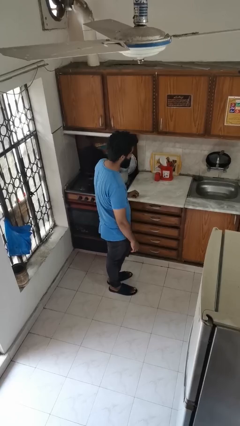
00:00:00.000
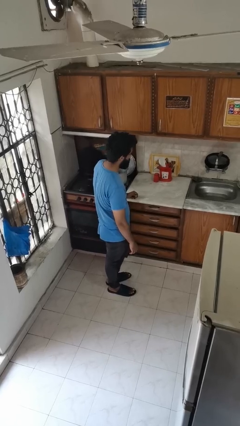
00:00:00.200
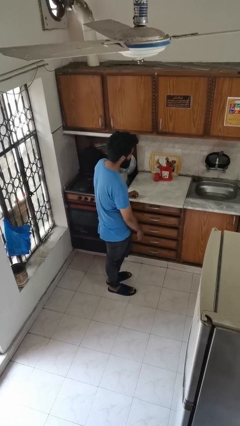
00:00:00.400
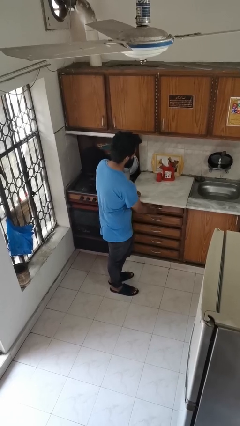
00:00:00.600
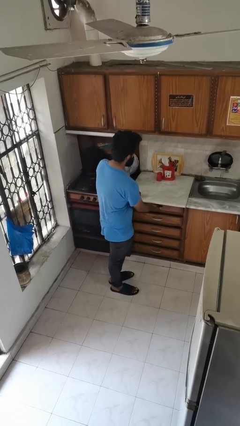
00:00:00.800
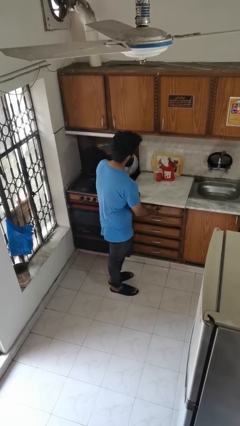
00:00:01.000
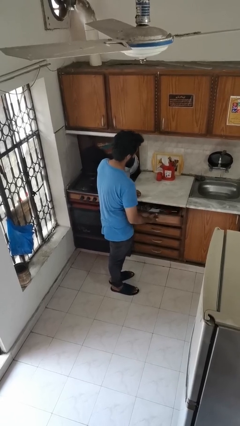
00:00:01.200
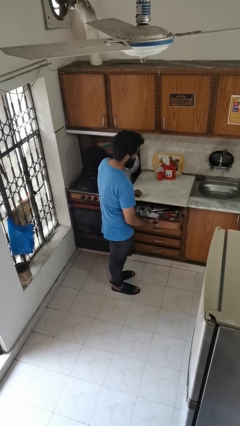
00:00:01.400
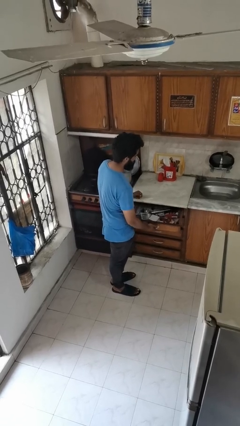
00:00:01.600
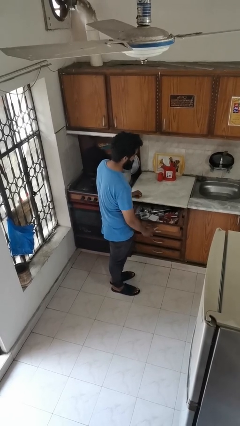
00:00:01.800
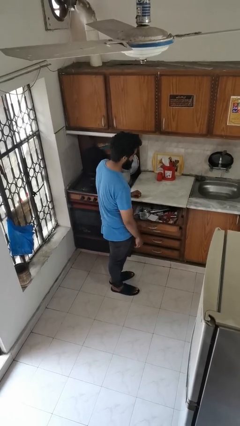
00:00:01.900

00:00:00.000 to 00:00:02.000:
person opens kitchen drawer

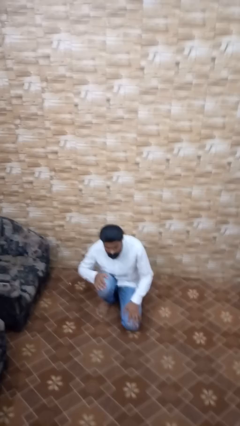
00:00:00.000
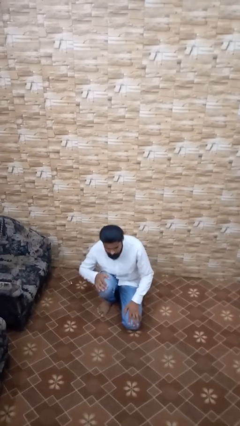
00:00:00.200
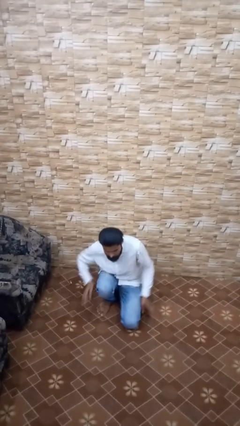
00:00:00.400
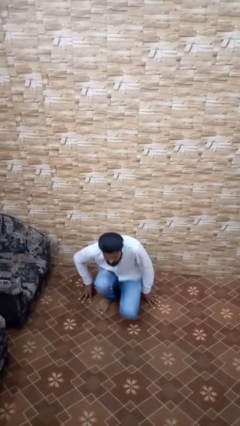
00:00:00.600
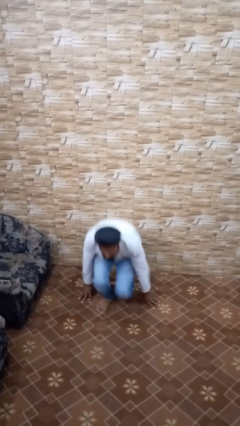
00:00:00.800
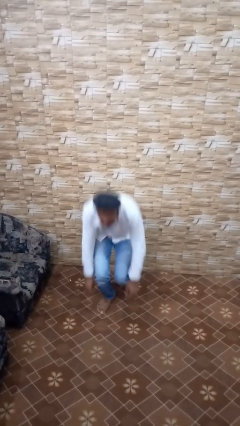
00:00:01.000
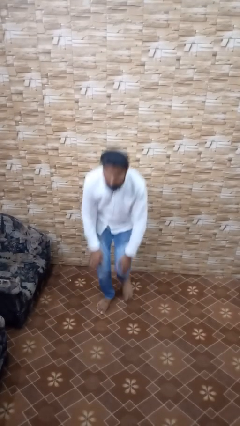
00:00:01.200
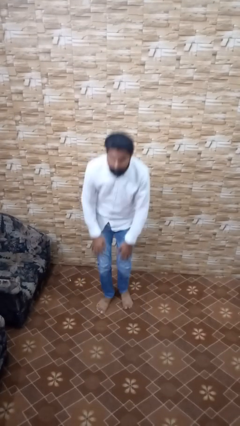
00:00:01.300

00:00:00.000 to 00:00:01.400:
person stands up from floor

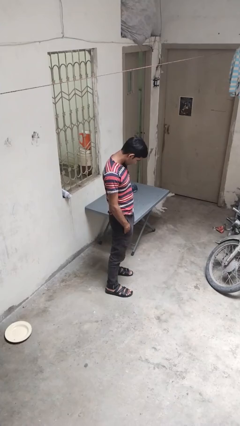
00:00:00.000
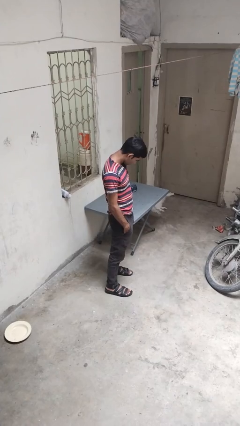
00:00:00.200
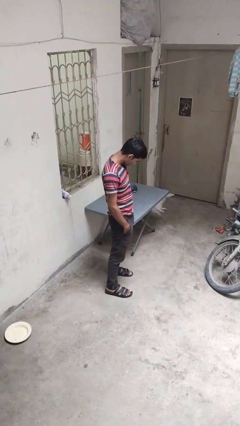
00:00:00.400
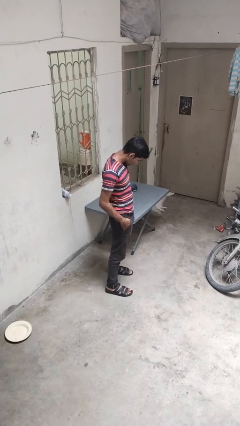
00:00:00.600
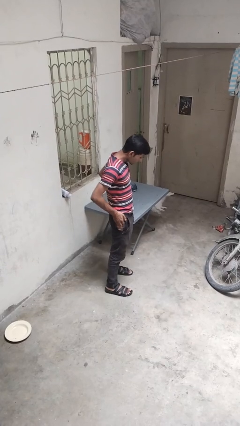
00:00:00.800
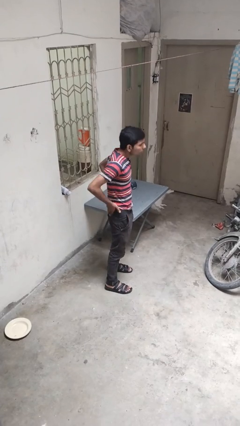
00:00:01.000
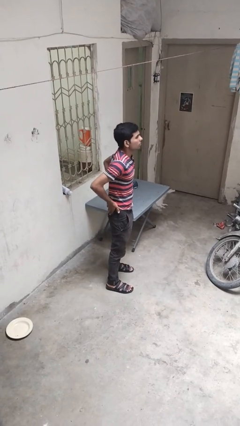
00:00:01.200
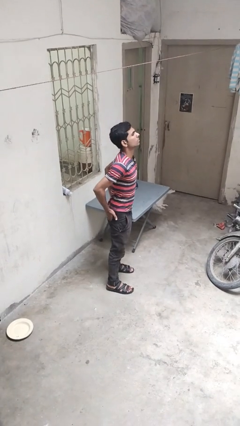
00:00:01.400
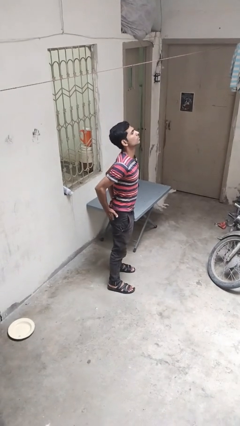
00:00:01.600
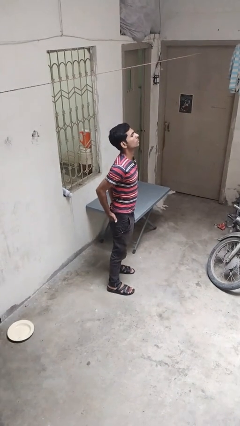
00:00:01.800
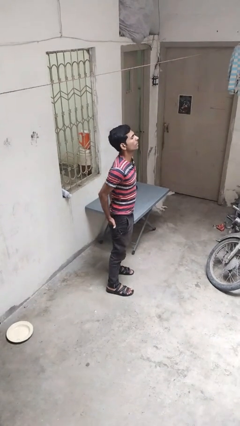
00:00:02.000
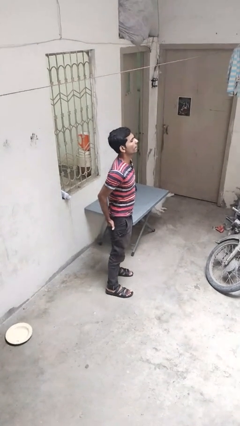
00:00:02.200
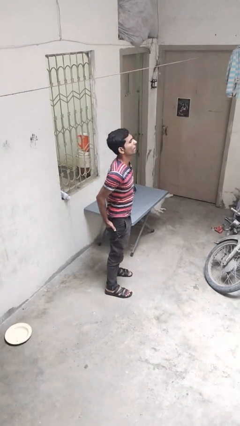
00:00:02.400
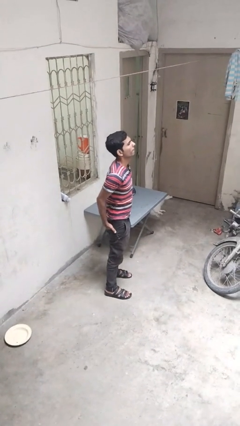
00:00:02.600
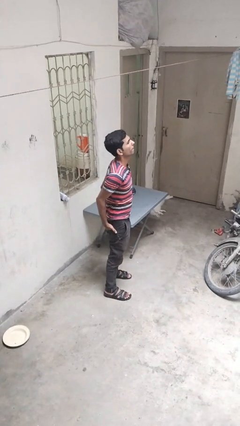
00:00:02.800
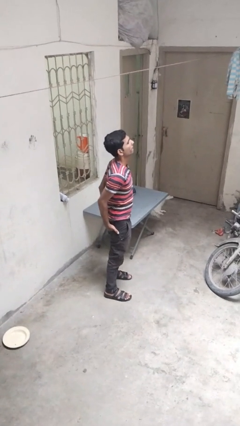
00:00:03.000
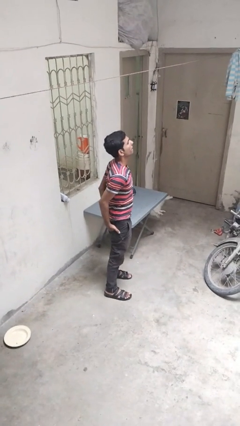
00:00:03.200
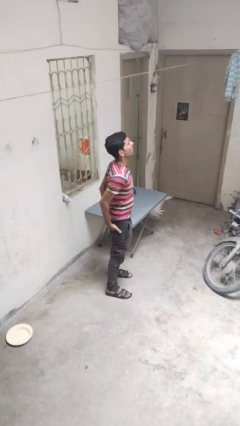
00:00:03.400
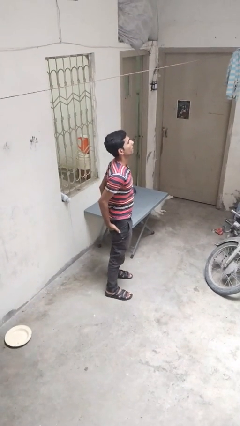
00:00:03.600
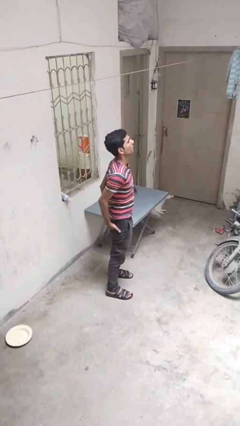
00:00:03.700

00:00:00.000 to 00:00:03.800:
person puts hands in back pockets

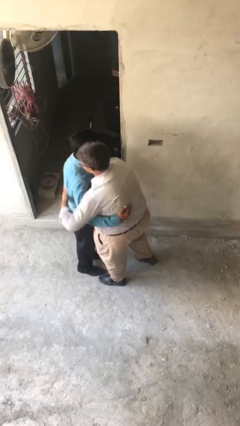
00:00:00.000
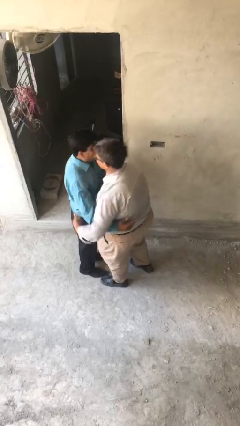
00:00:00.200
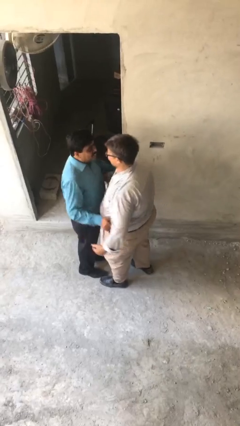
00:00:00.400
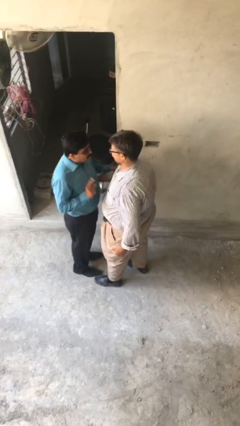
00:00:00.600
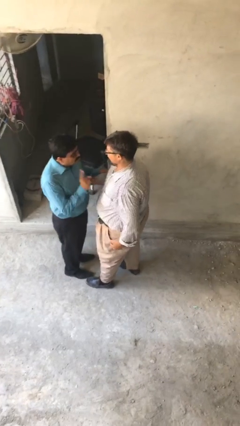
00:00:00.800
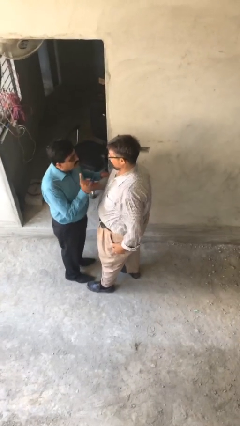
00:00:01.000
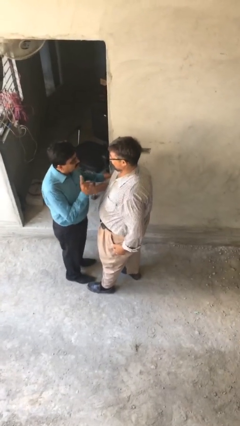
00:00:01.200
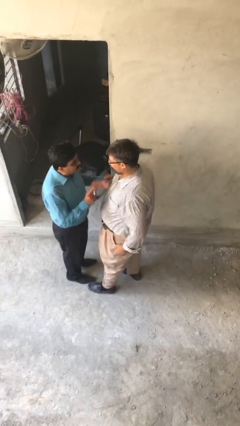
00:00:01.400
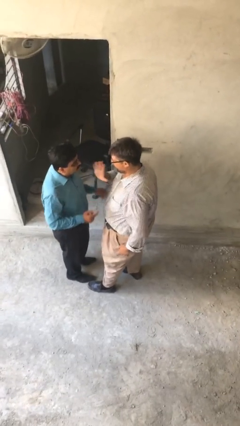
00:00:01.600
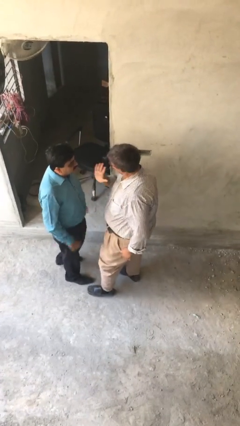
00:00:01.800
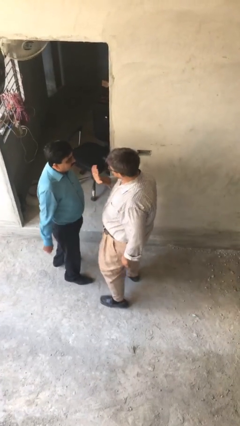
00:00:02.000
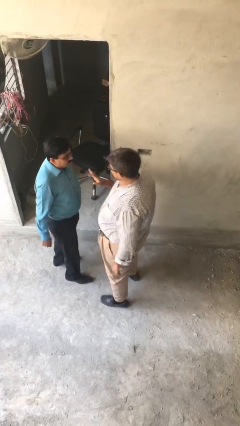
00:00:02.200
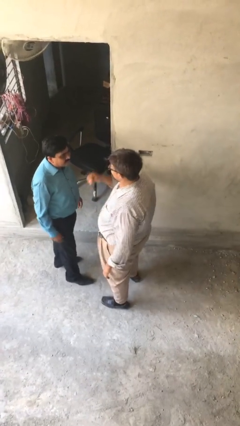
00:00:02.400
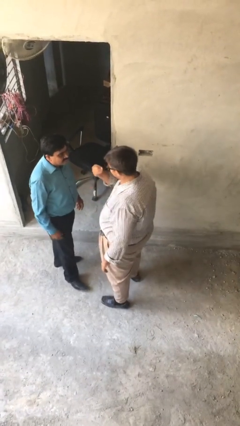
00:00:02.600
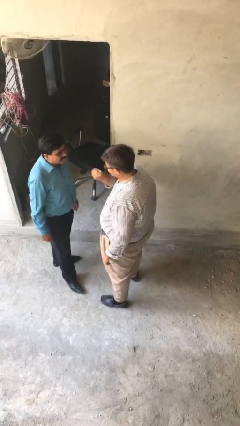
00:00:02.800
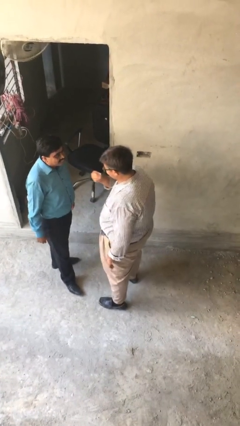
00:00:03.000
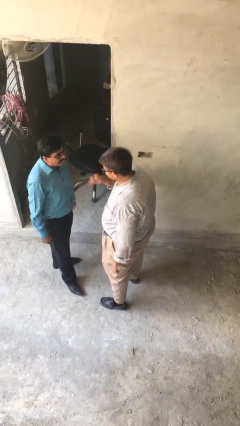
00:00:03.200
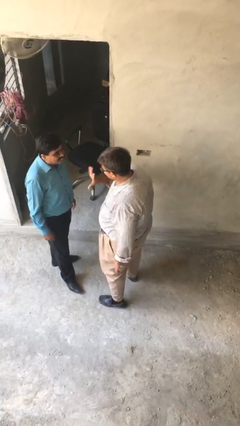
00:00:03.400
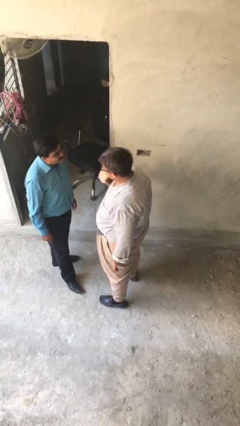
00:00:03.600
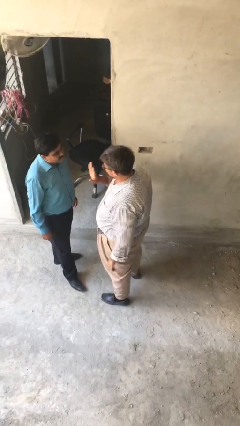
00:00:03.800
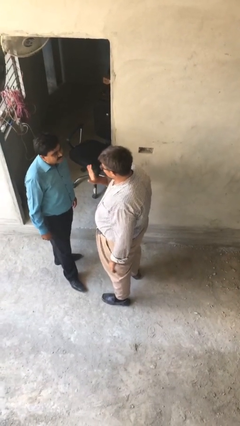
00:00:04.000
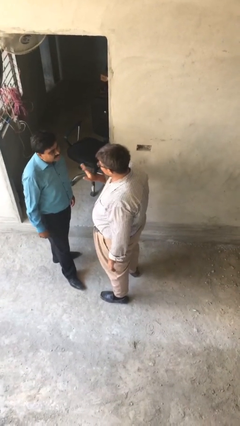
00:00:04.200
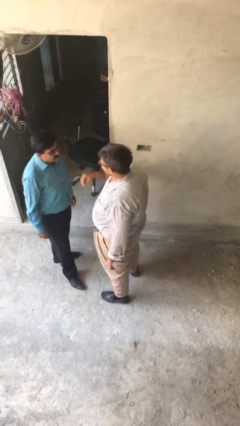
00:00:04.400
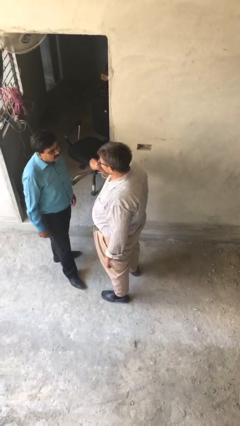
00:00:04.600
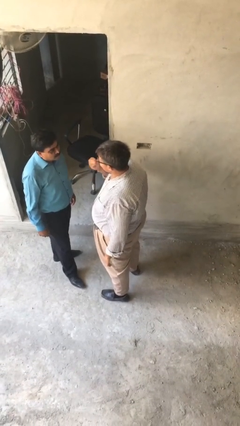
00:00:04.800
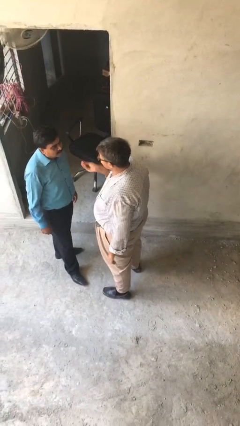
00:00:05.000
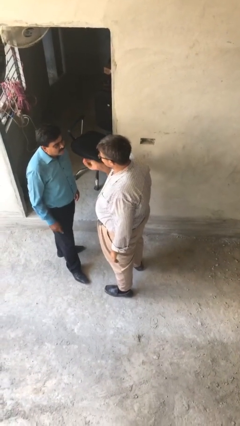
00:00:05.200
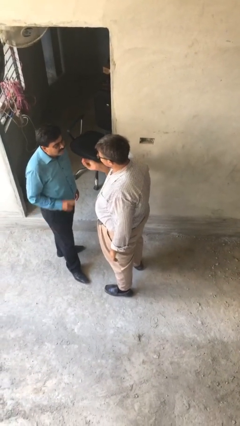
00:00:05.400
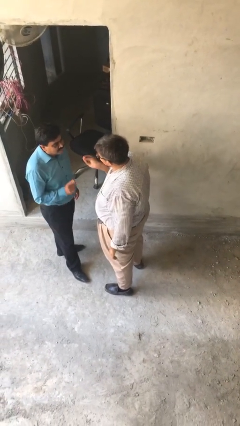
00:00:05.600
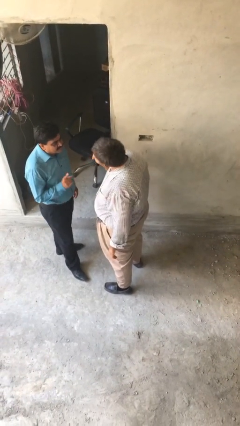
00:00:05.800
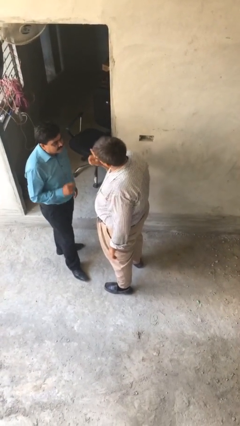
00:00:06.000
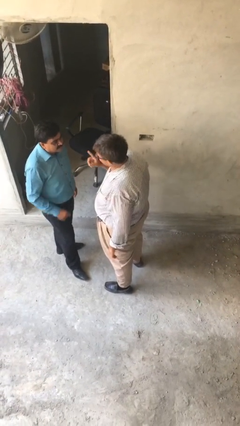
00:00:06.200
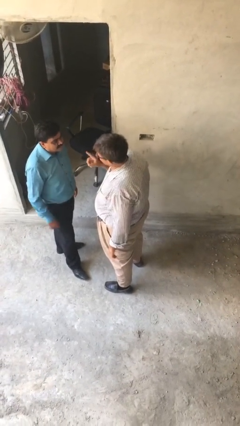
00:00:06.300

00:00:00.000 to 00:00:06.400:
person talks to person

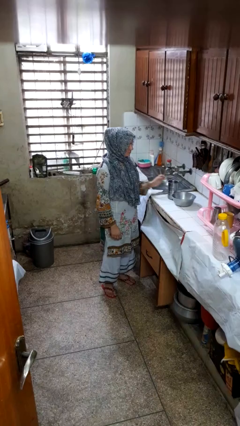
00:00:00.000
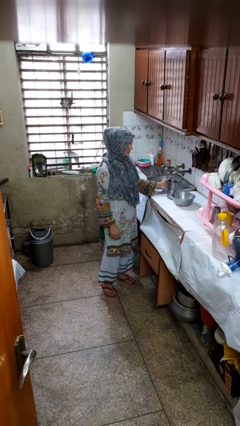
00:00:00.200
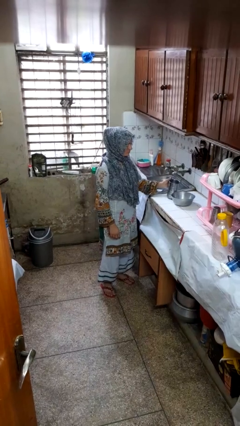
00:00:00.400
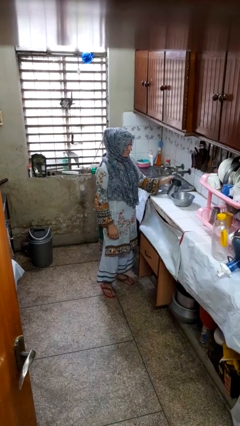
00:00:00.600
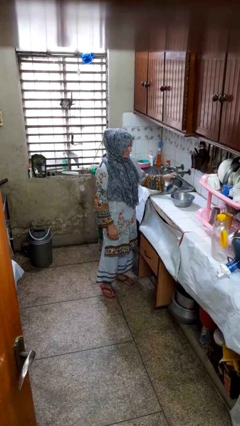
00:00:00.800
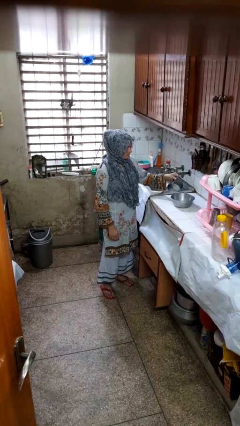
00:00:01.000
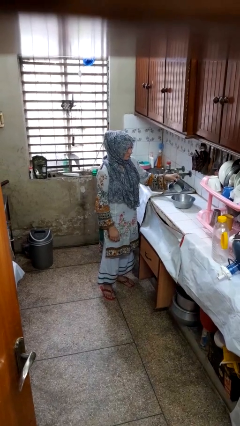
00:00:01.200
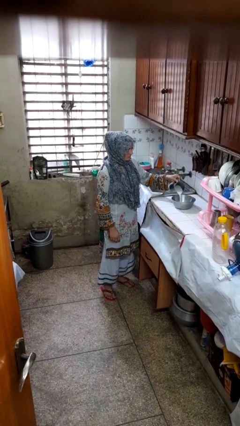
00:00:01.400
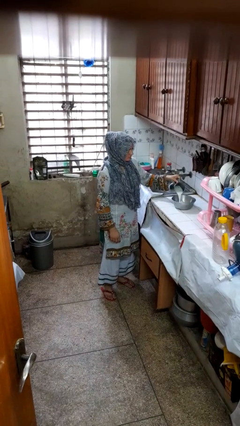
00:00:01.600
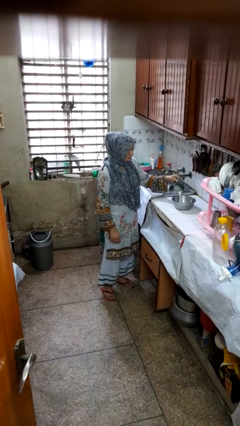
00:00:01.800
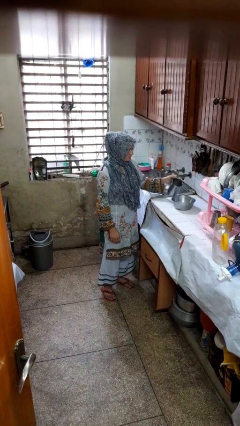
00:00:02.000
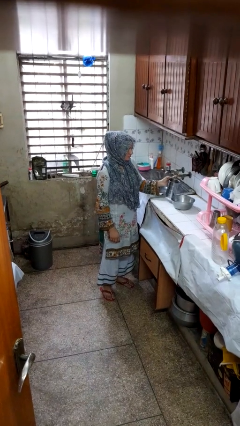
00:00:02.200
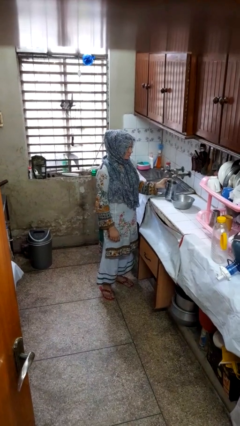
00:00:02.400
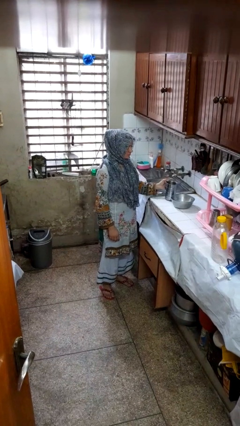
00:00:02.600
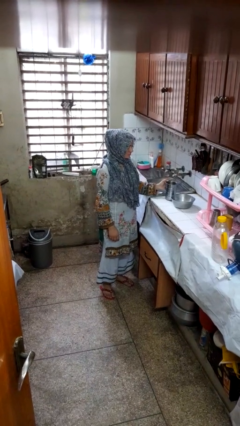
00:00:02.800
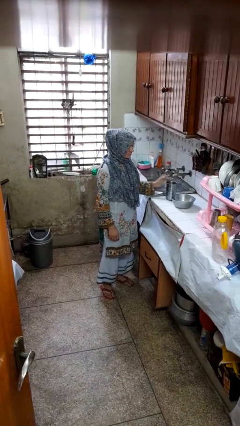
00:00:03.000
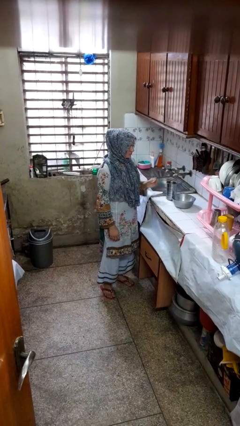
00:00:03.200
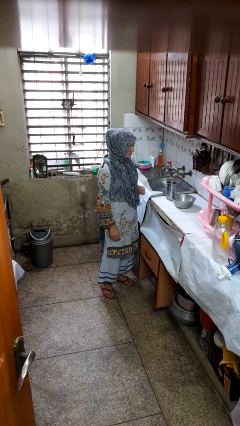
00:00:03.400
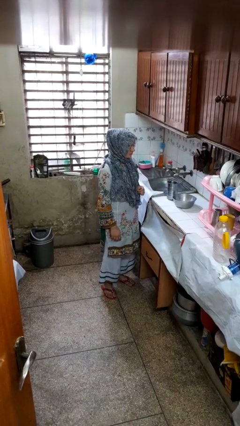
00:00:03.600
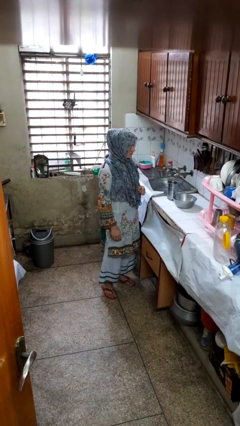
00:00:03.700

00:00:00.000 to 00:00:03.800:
person pours into bowl

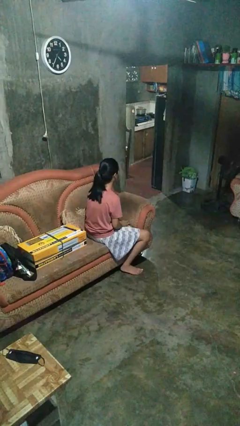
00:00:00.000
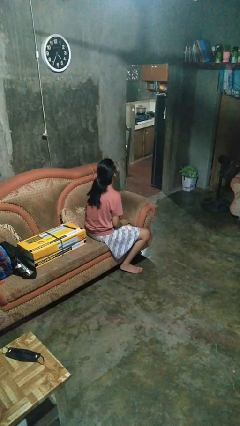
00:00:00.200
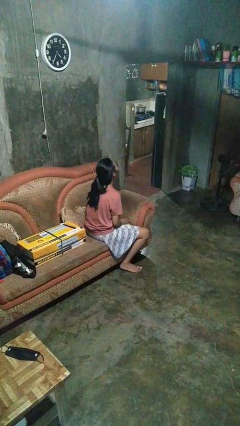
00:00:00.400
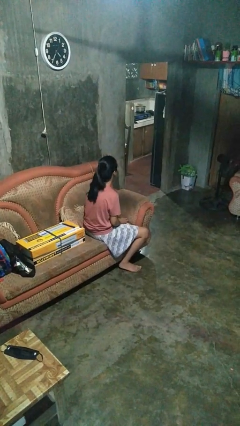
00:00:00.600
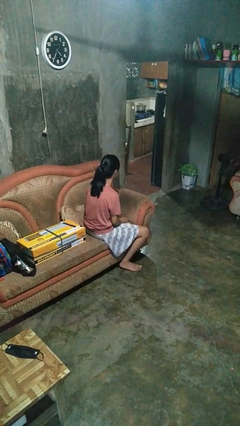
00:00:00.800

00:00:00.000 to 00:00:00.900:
person nods head
